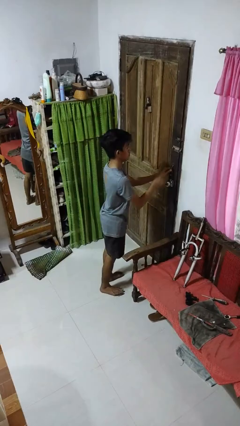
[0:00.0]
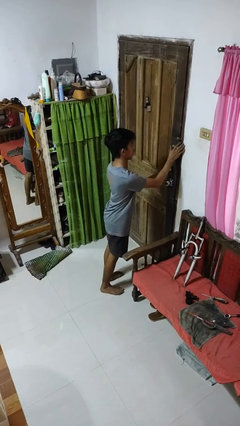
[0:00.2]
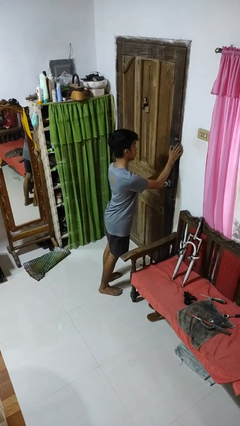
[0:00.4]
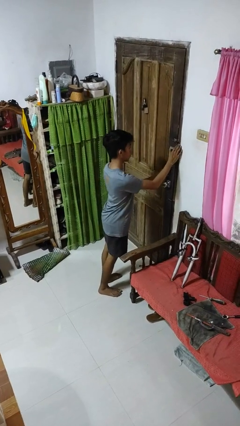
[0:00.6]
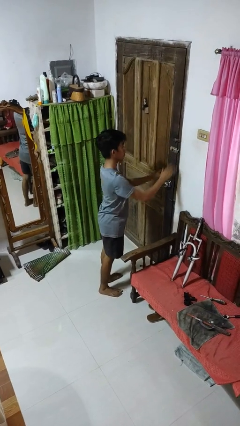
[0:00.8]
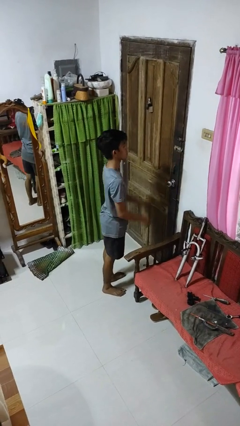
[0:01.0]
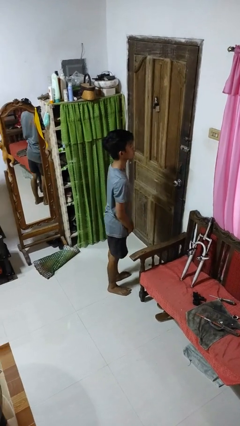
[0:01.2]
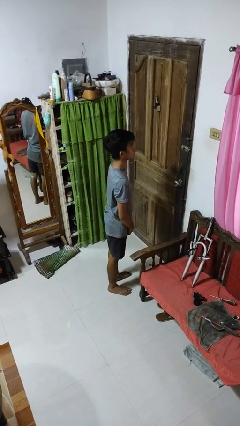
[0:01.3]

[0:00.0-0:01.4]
person locks door with keys

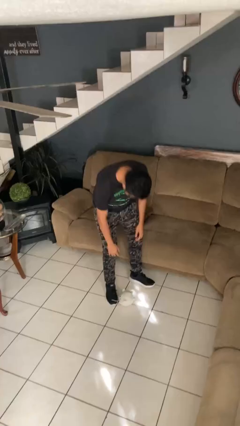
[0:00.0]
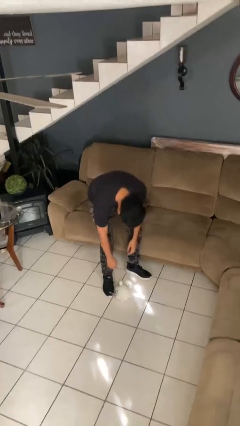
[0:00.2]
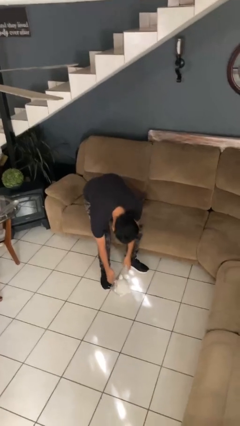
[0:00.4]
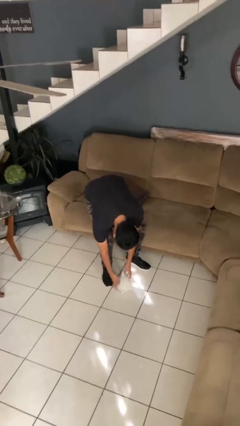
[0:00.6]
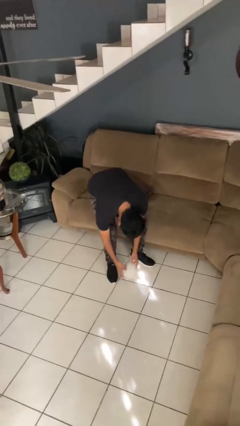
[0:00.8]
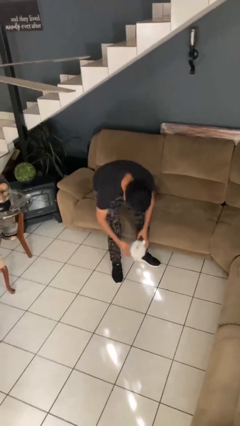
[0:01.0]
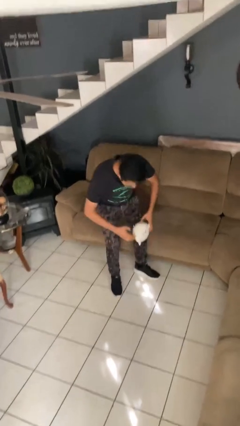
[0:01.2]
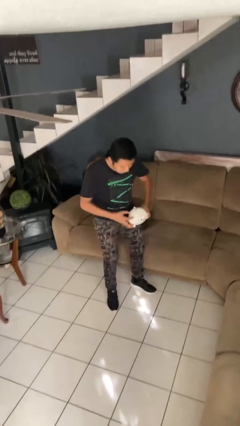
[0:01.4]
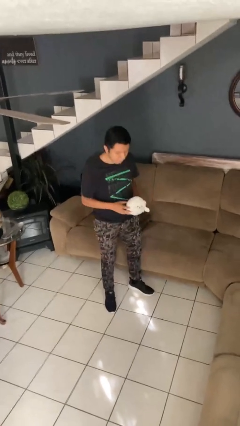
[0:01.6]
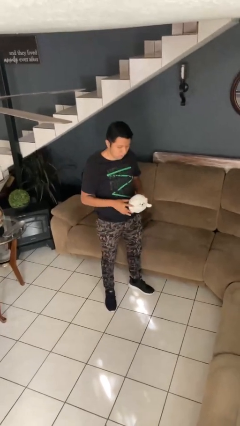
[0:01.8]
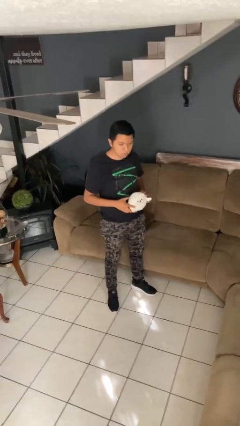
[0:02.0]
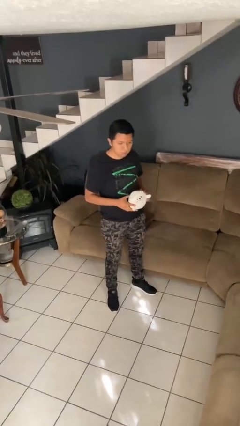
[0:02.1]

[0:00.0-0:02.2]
person picks up object from floor

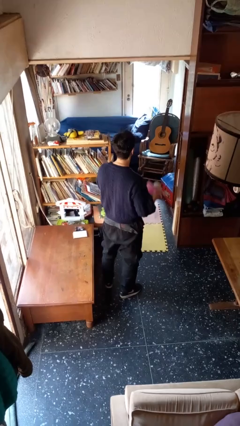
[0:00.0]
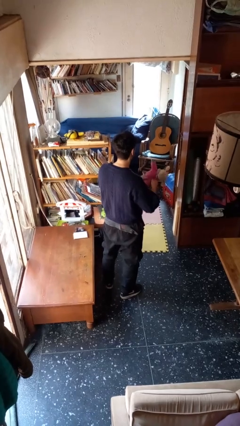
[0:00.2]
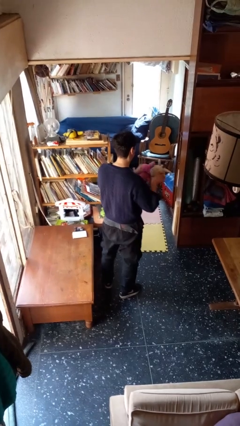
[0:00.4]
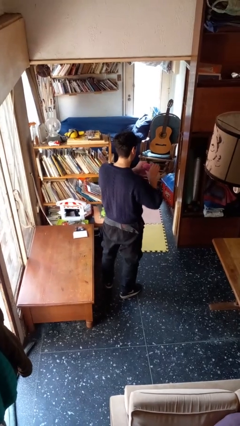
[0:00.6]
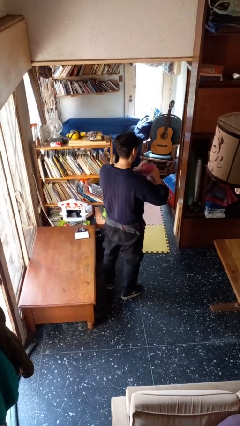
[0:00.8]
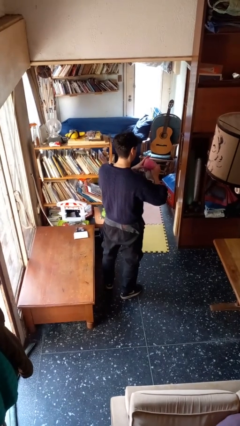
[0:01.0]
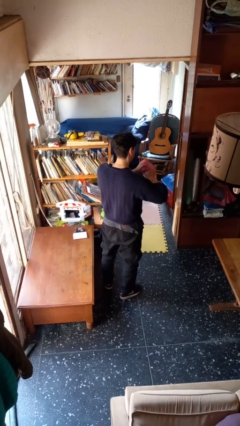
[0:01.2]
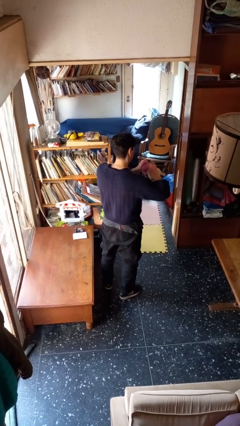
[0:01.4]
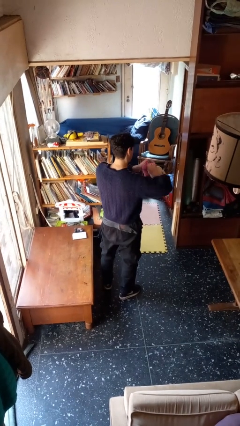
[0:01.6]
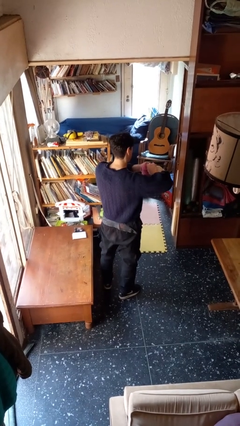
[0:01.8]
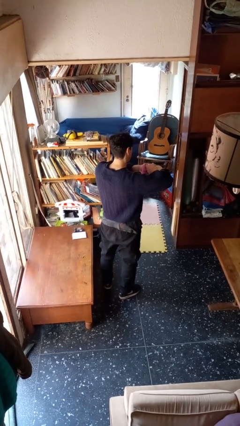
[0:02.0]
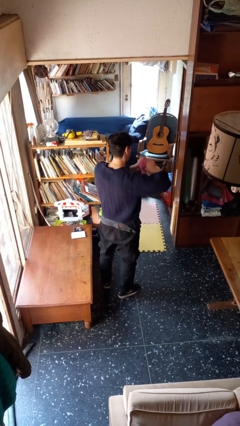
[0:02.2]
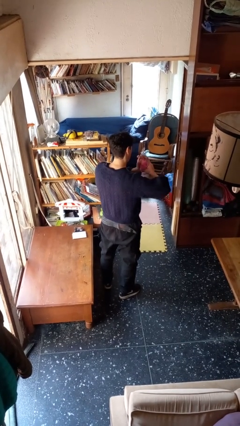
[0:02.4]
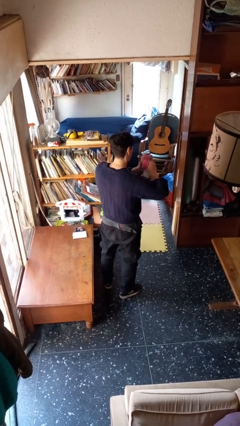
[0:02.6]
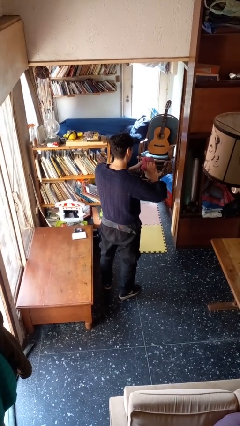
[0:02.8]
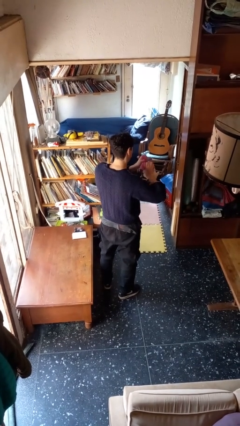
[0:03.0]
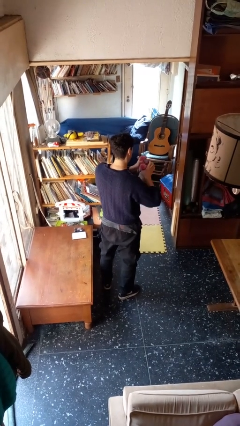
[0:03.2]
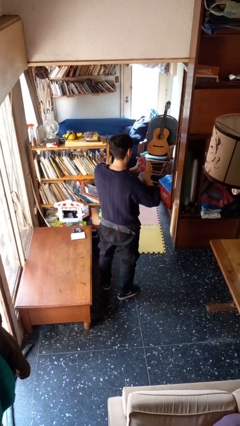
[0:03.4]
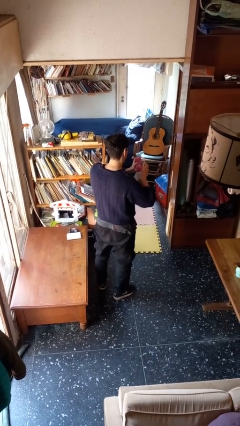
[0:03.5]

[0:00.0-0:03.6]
person squeezes object

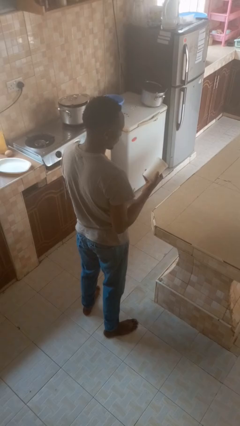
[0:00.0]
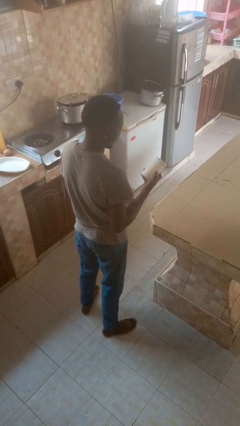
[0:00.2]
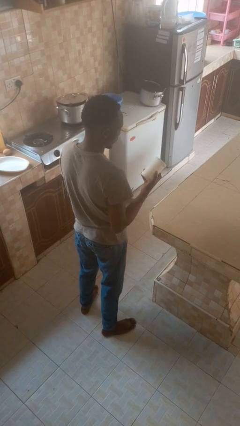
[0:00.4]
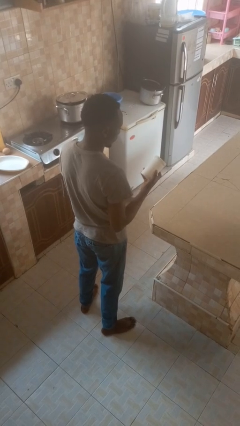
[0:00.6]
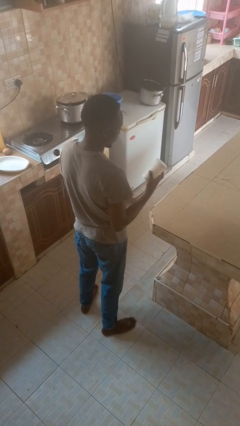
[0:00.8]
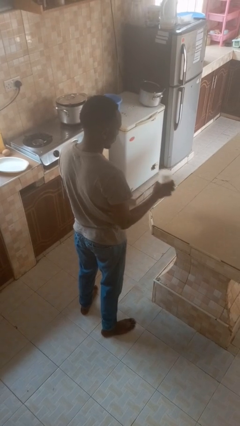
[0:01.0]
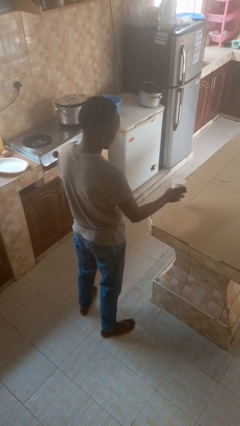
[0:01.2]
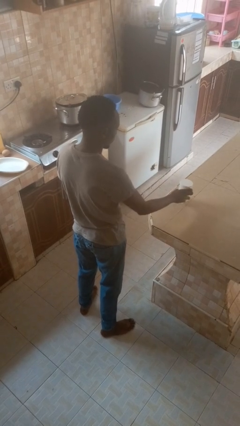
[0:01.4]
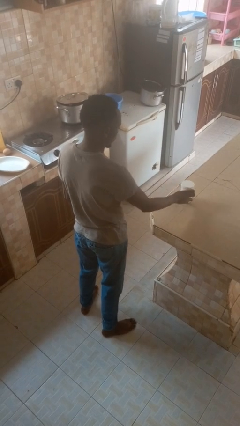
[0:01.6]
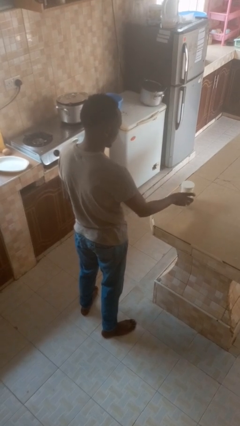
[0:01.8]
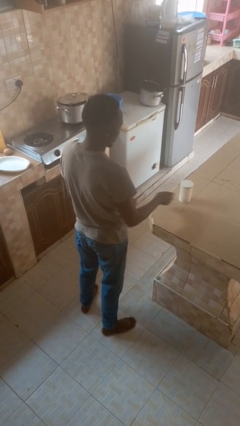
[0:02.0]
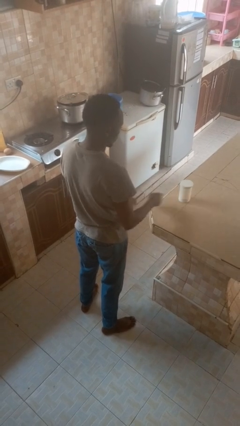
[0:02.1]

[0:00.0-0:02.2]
person puts down object on countertop

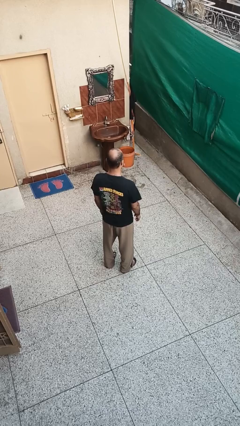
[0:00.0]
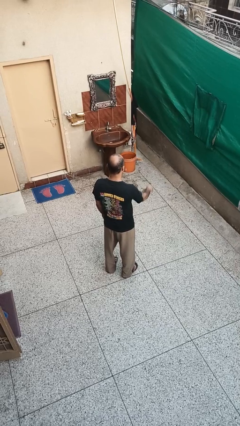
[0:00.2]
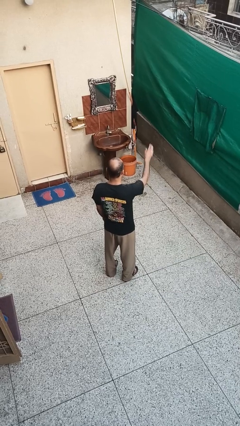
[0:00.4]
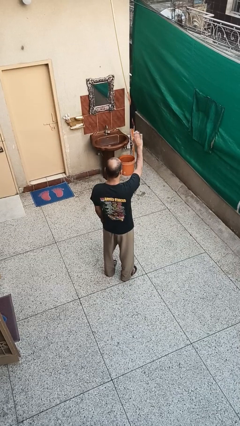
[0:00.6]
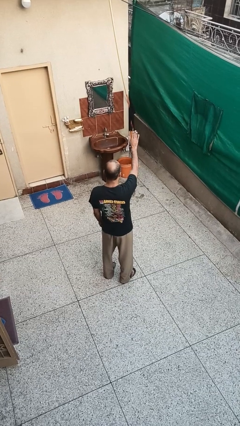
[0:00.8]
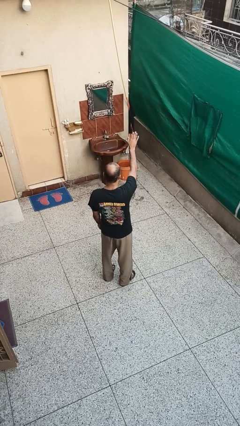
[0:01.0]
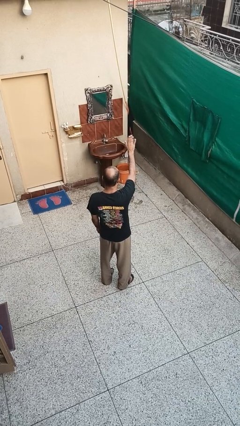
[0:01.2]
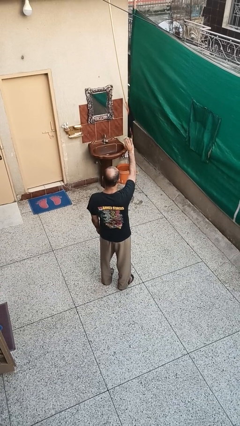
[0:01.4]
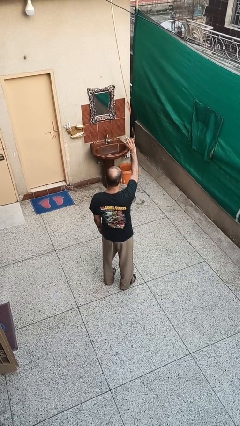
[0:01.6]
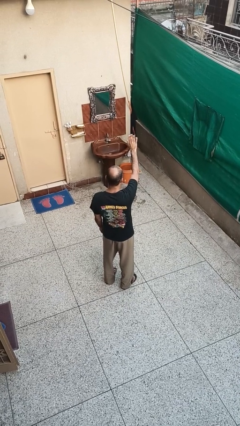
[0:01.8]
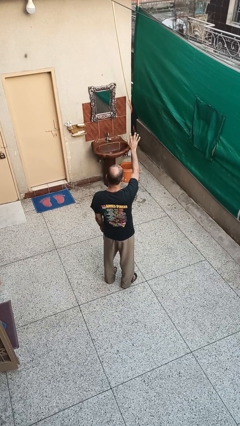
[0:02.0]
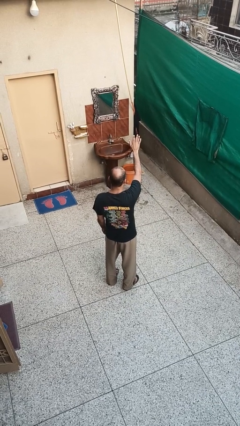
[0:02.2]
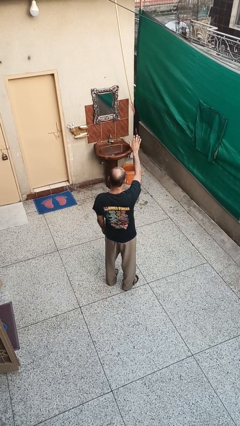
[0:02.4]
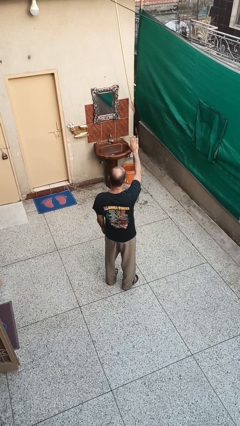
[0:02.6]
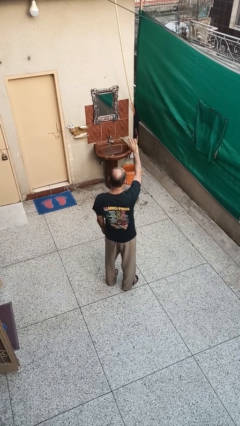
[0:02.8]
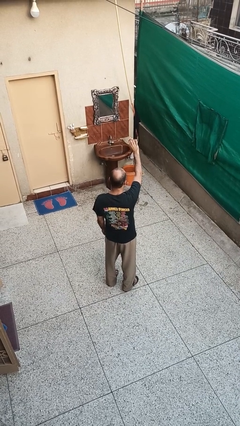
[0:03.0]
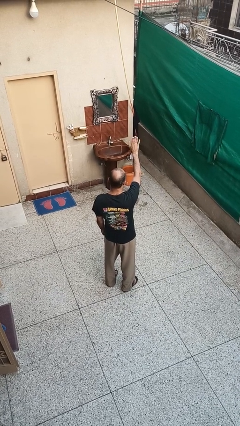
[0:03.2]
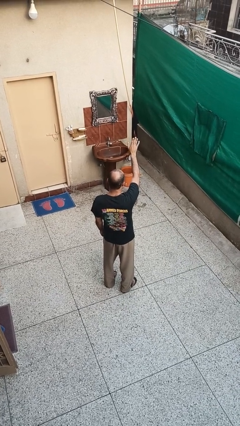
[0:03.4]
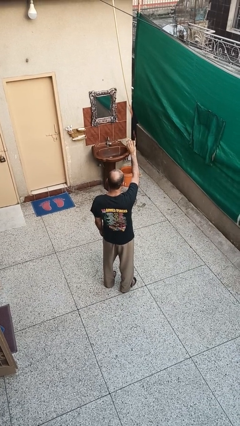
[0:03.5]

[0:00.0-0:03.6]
person waves at person

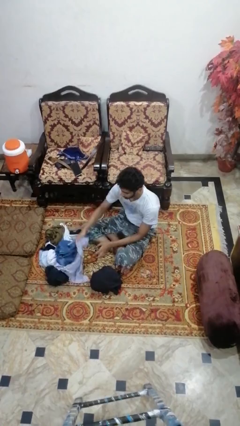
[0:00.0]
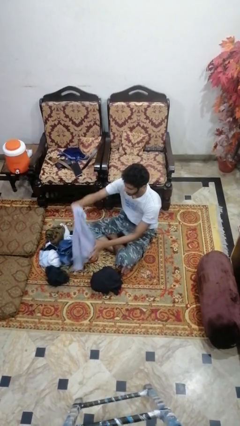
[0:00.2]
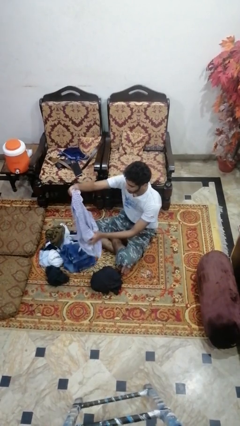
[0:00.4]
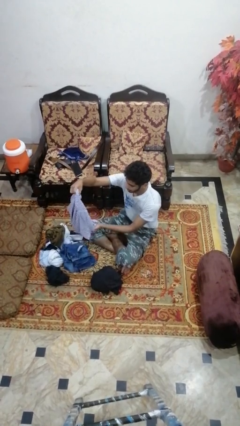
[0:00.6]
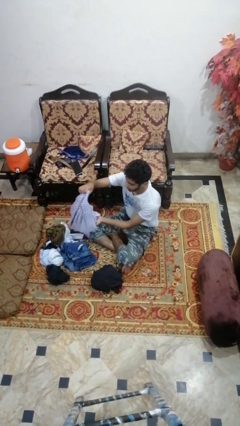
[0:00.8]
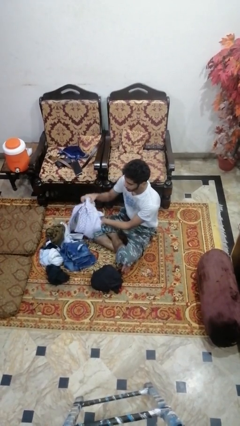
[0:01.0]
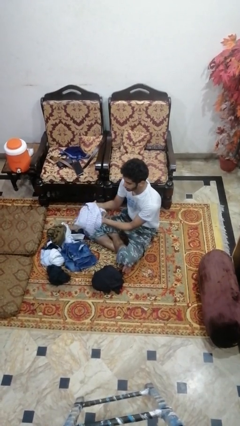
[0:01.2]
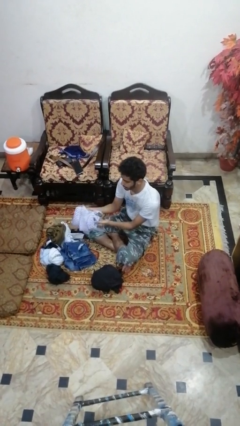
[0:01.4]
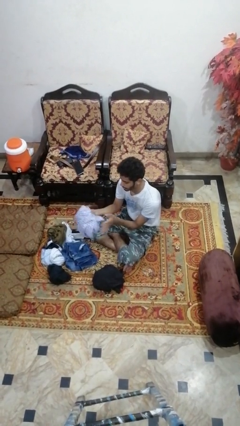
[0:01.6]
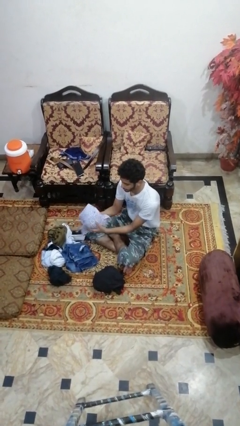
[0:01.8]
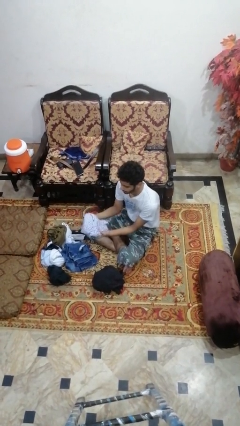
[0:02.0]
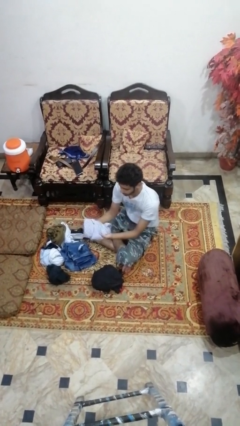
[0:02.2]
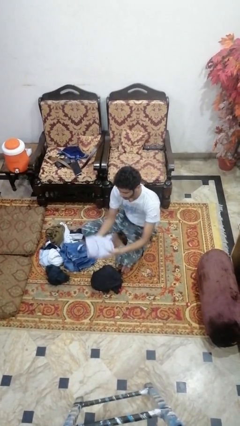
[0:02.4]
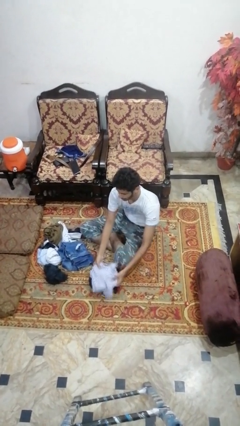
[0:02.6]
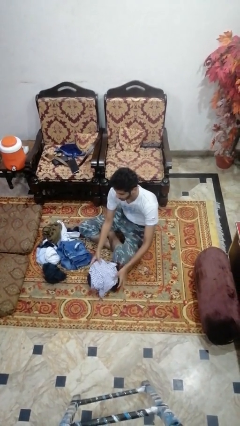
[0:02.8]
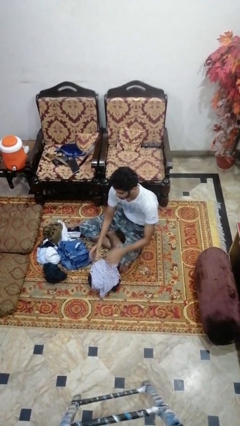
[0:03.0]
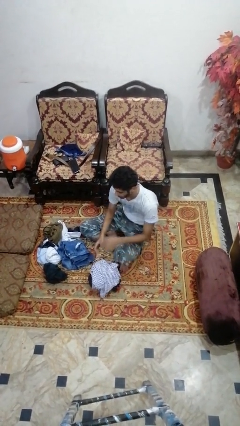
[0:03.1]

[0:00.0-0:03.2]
person folds shirt

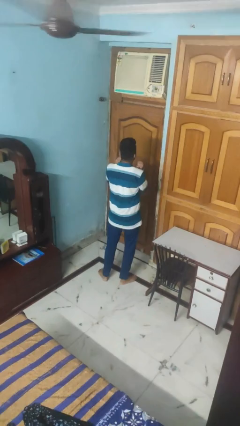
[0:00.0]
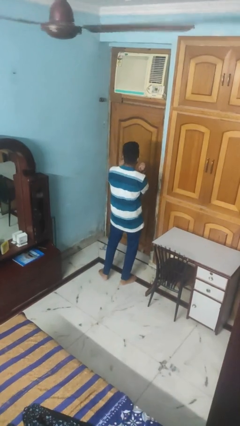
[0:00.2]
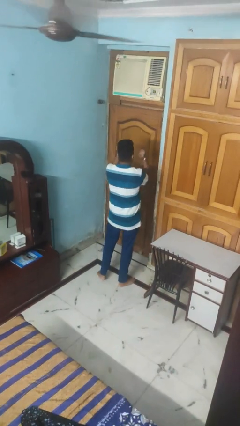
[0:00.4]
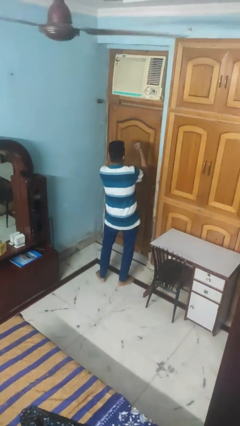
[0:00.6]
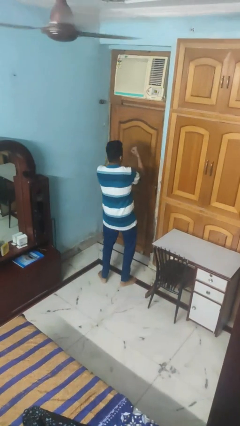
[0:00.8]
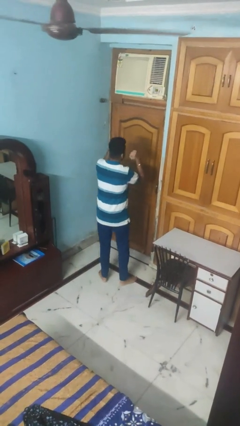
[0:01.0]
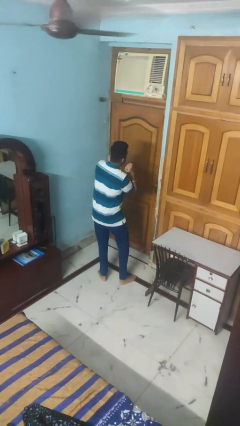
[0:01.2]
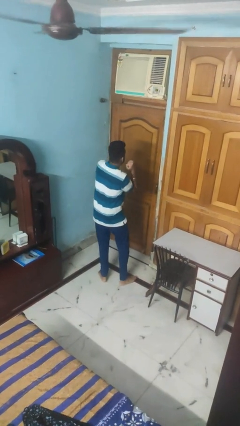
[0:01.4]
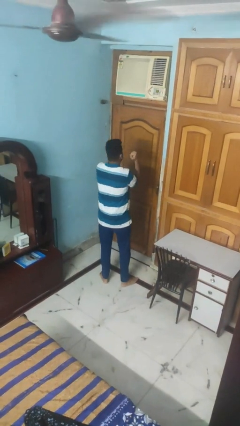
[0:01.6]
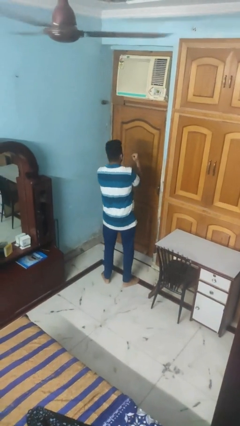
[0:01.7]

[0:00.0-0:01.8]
person dances in place
